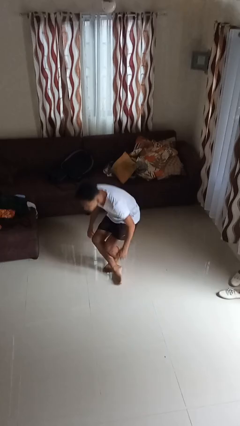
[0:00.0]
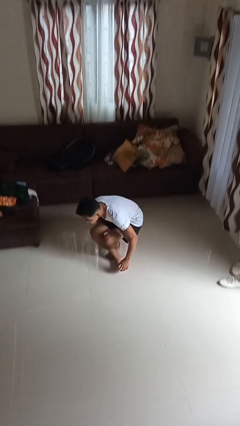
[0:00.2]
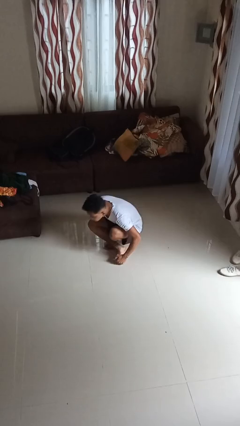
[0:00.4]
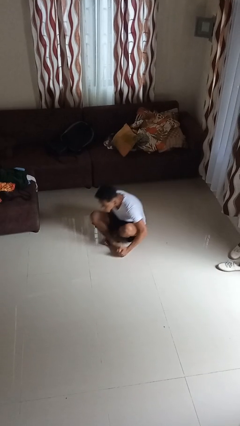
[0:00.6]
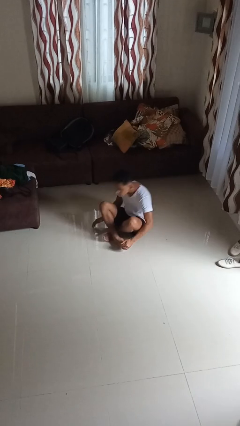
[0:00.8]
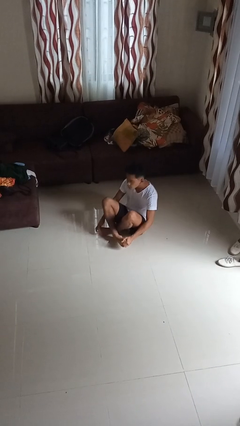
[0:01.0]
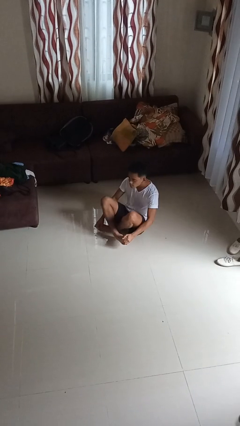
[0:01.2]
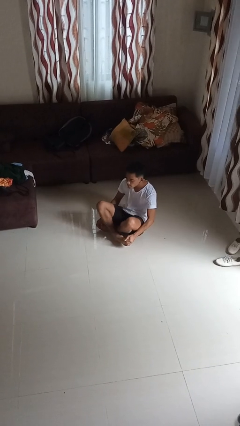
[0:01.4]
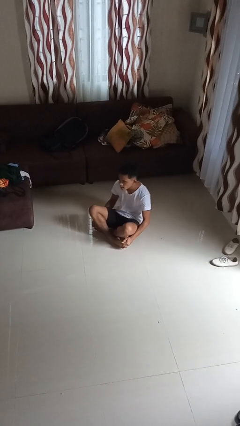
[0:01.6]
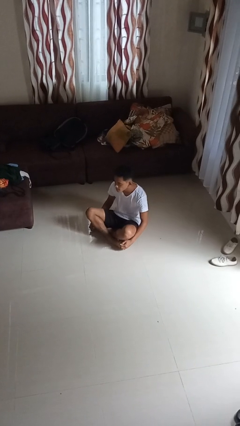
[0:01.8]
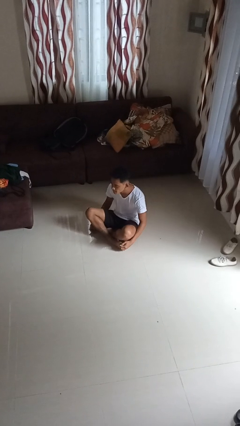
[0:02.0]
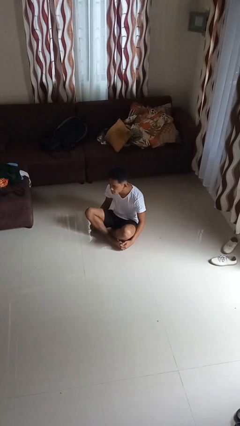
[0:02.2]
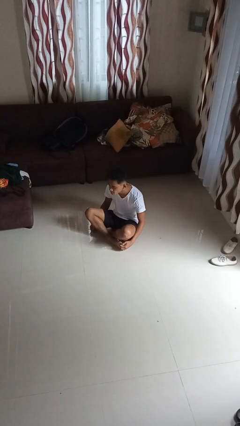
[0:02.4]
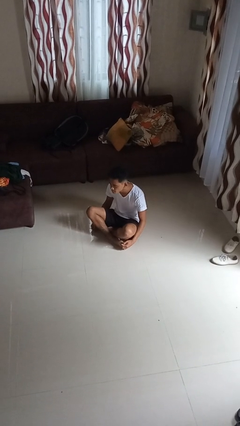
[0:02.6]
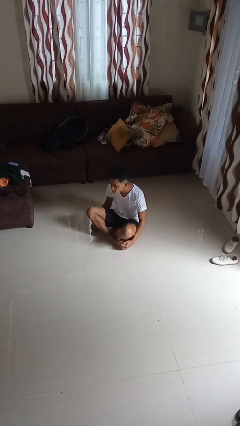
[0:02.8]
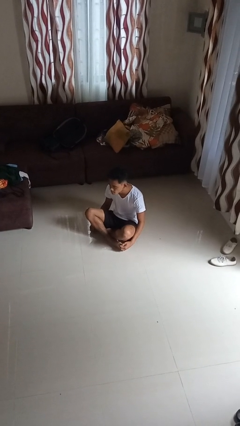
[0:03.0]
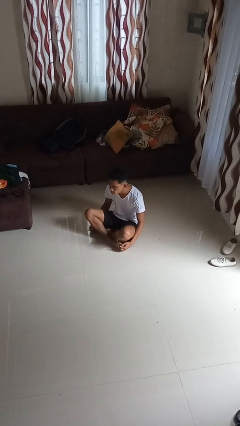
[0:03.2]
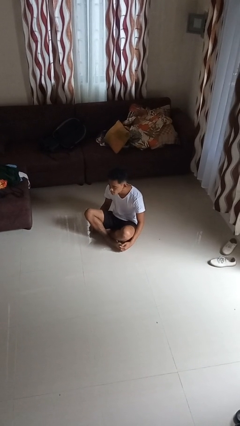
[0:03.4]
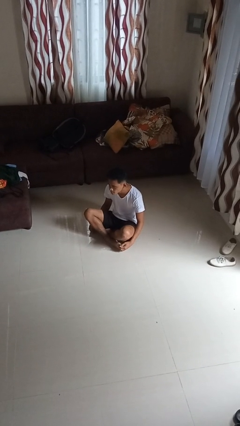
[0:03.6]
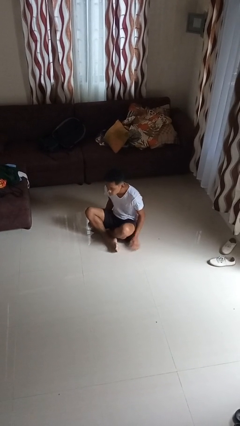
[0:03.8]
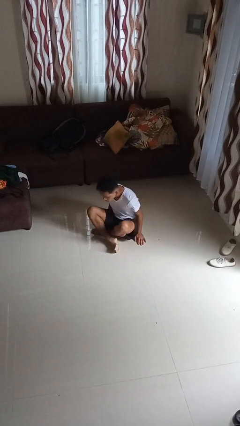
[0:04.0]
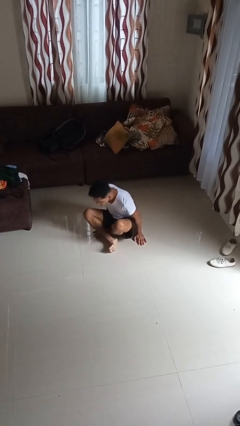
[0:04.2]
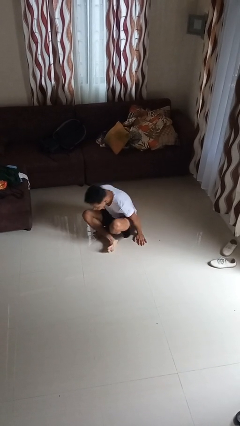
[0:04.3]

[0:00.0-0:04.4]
person sits crisscross

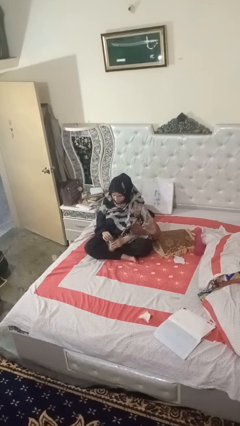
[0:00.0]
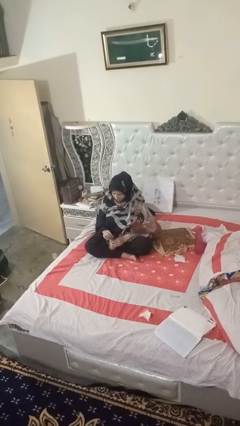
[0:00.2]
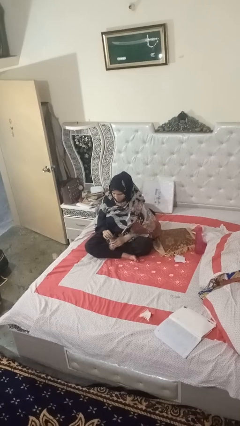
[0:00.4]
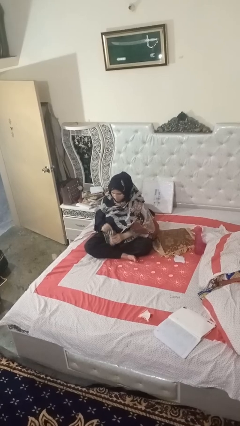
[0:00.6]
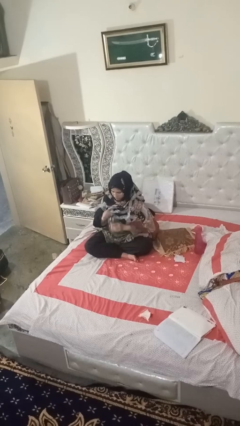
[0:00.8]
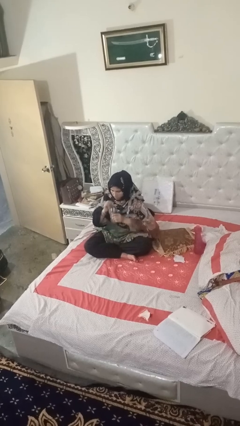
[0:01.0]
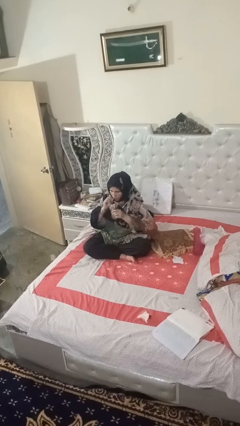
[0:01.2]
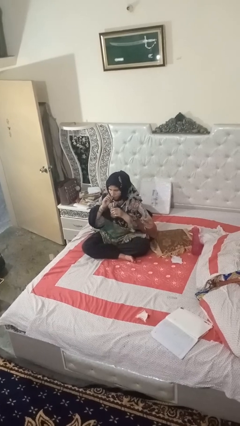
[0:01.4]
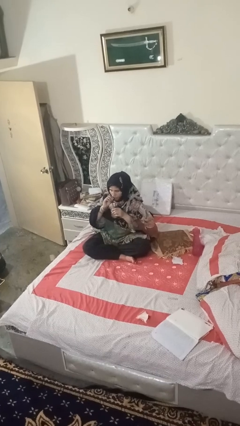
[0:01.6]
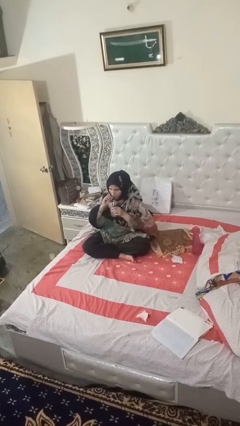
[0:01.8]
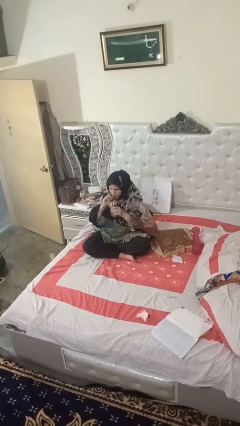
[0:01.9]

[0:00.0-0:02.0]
person drinks from straw

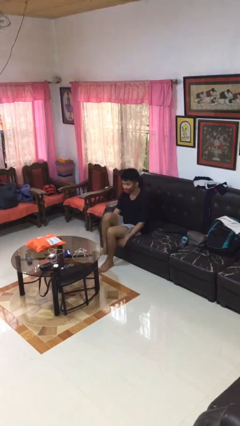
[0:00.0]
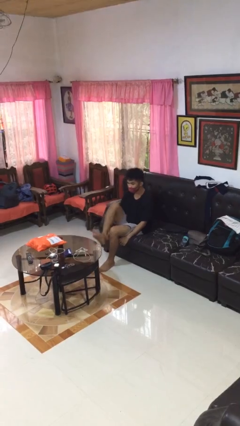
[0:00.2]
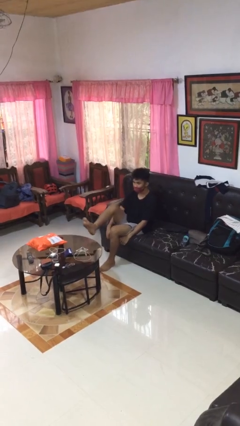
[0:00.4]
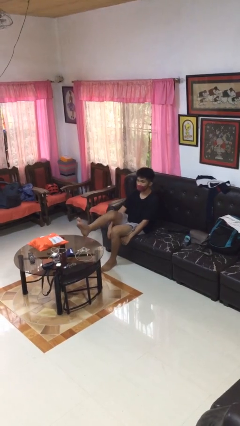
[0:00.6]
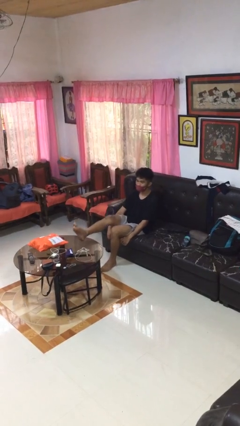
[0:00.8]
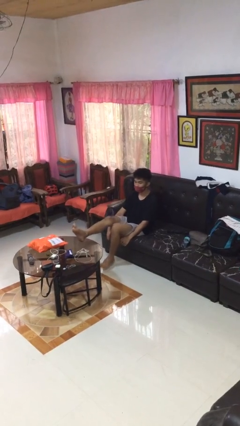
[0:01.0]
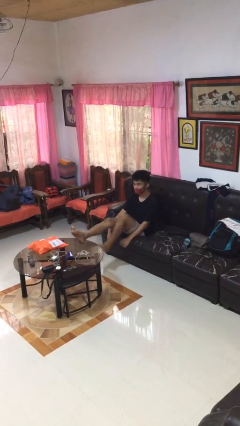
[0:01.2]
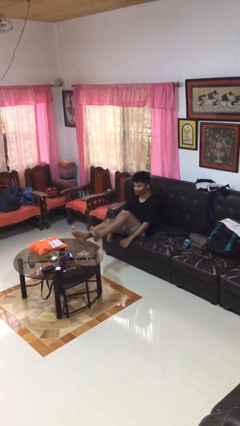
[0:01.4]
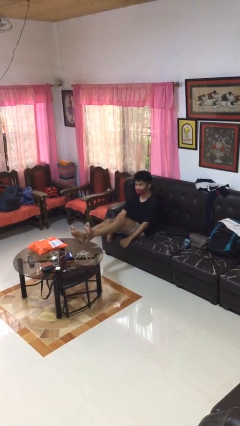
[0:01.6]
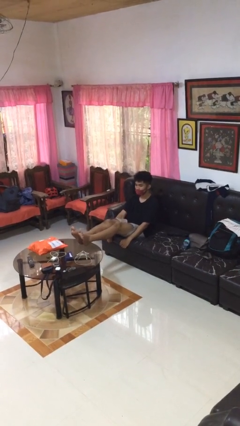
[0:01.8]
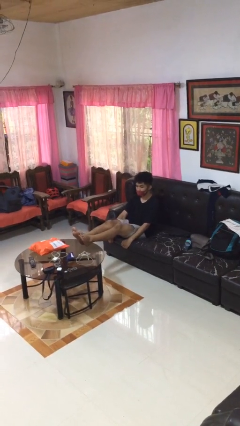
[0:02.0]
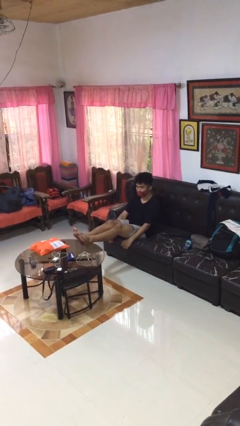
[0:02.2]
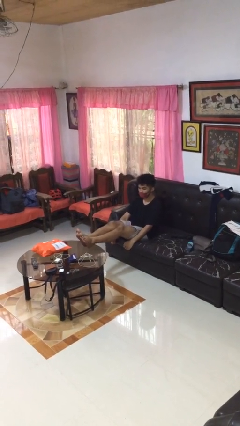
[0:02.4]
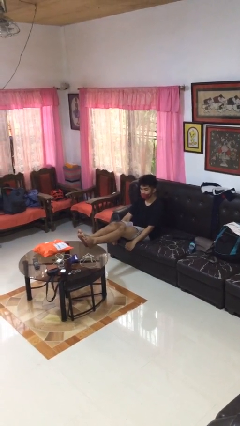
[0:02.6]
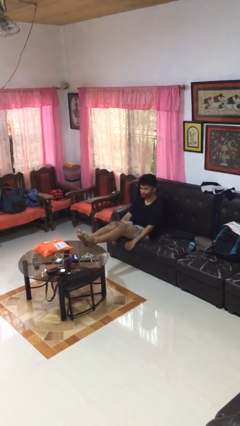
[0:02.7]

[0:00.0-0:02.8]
person puts feet up

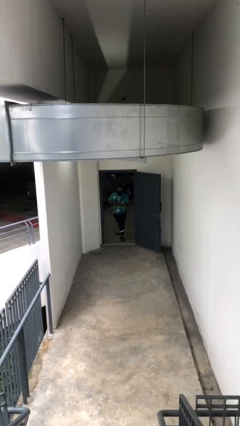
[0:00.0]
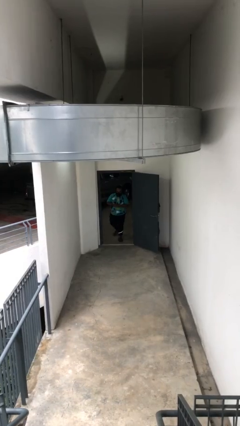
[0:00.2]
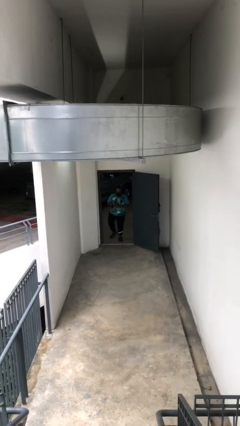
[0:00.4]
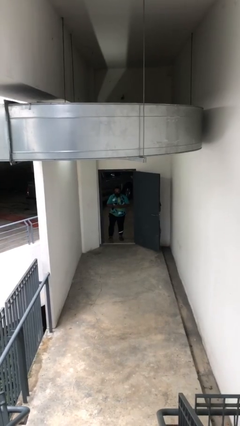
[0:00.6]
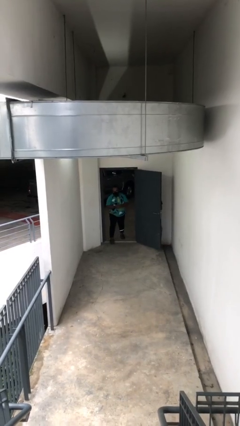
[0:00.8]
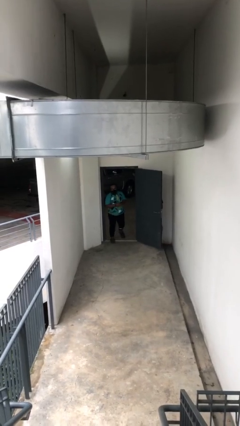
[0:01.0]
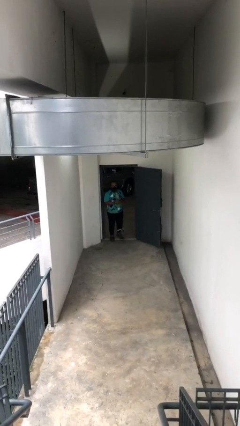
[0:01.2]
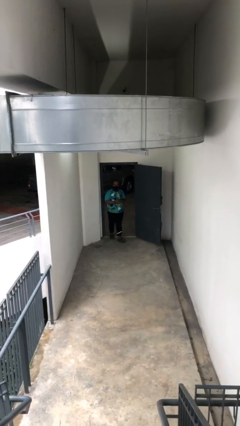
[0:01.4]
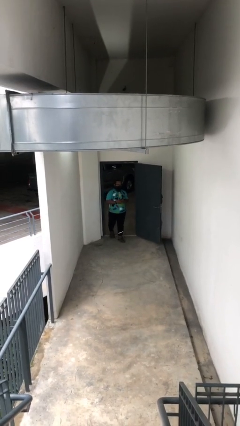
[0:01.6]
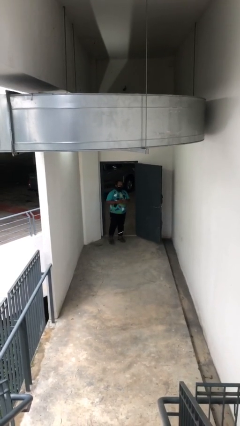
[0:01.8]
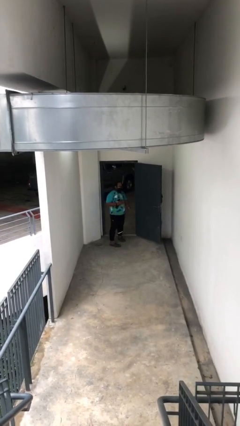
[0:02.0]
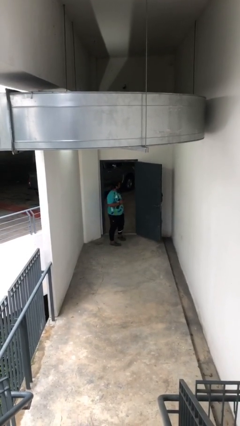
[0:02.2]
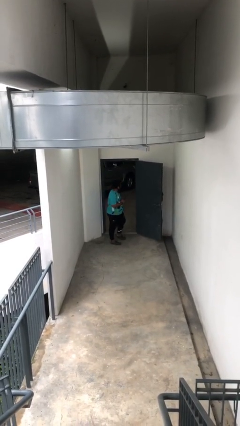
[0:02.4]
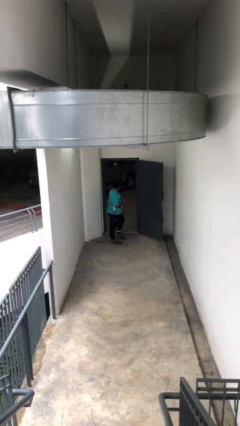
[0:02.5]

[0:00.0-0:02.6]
person enters scene through structure

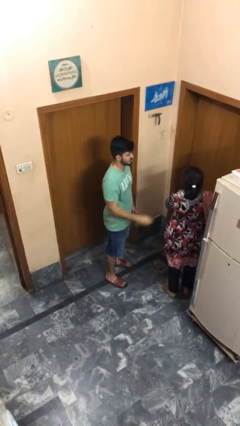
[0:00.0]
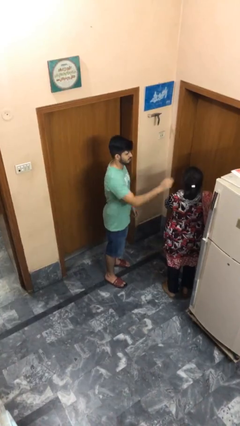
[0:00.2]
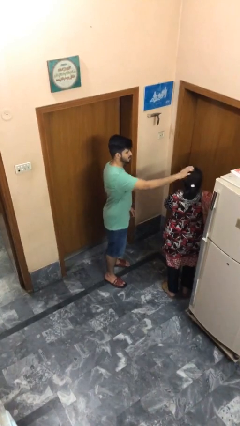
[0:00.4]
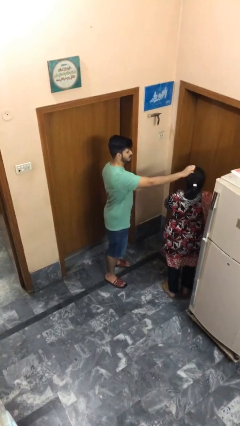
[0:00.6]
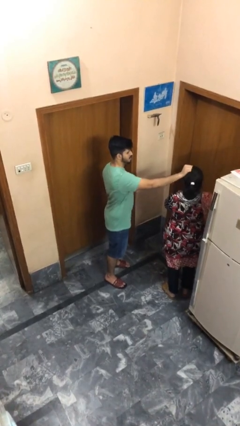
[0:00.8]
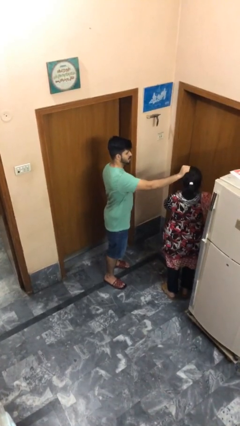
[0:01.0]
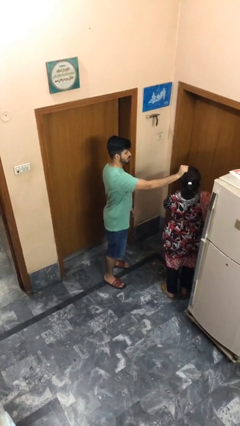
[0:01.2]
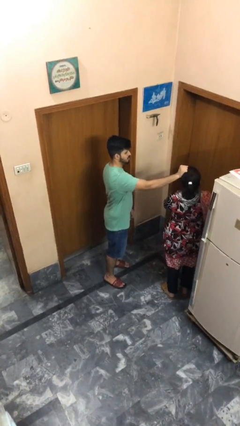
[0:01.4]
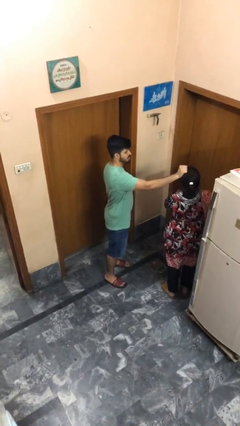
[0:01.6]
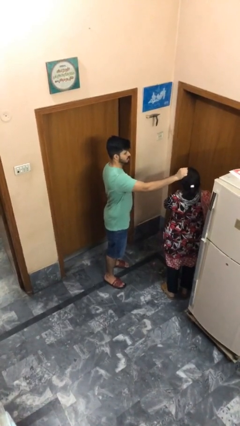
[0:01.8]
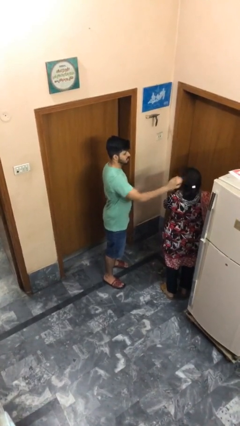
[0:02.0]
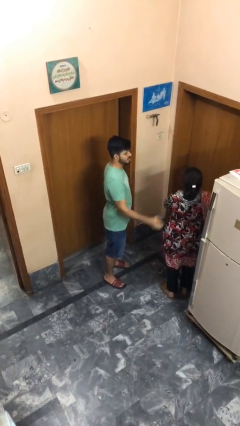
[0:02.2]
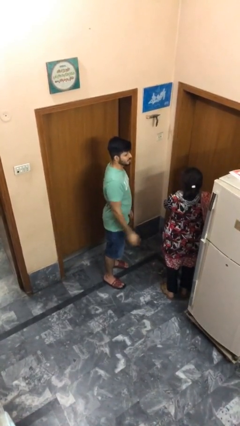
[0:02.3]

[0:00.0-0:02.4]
person grabs person by hair

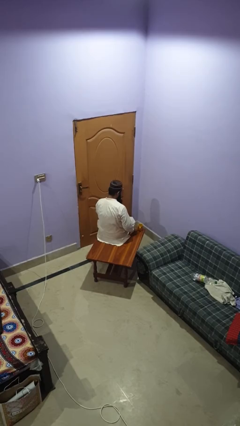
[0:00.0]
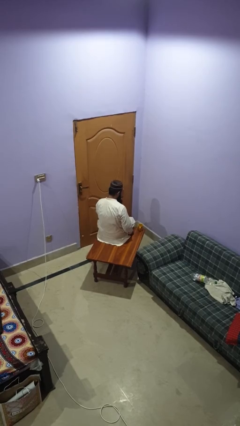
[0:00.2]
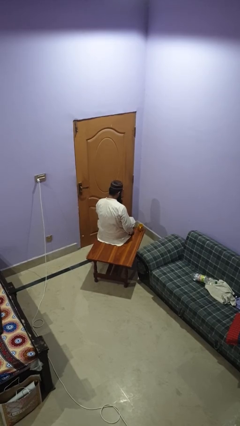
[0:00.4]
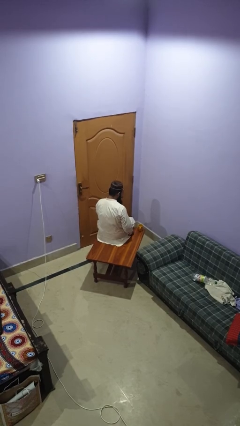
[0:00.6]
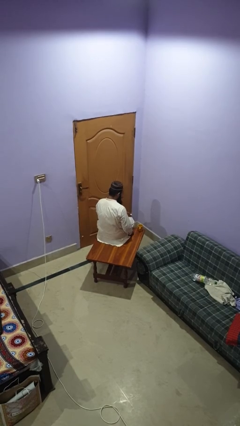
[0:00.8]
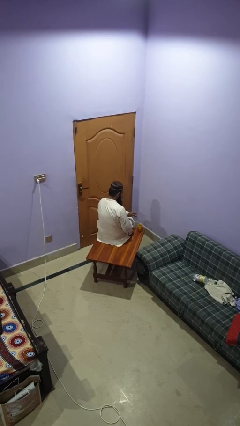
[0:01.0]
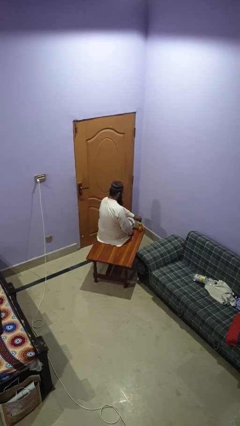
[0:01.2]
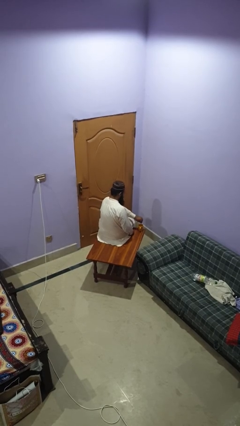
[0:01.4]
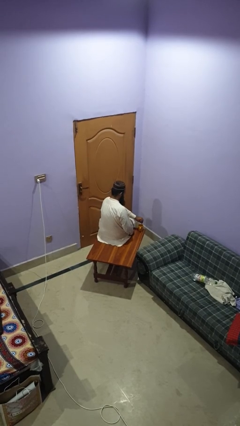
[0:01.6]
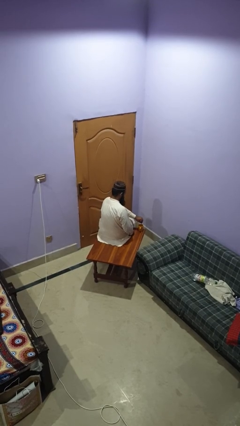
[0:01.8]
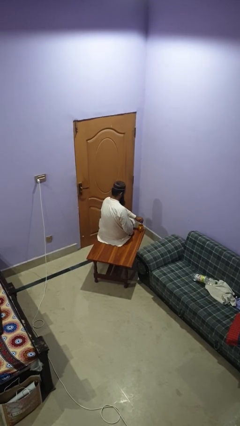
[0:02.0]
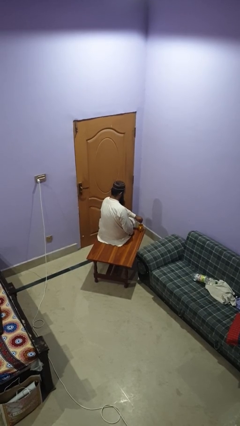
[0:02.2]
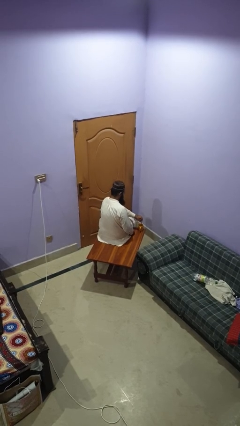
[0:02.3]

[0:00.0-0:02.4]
person stirs mug

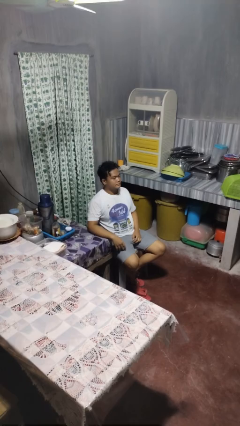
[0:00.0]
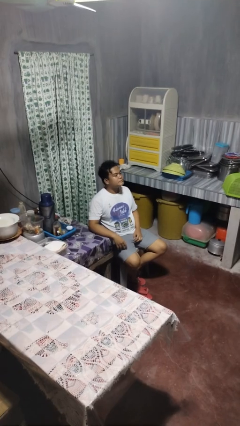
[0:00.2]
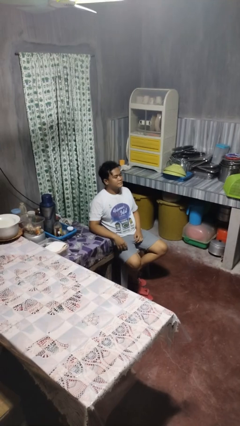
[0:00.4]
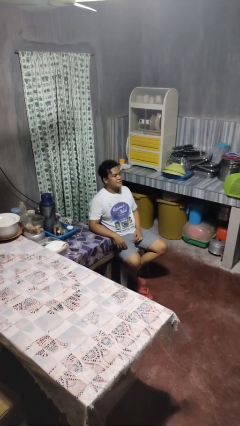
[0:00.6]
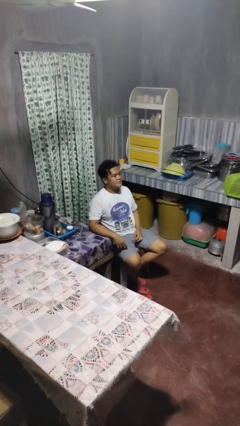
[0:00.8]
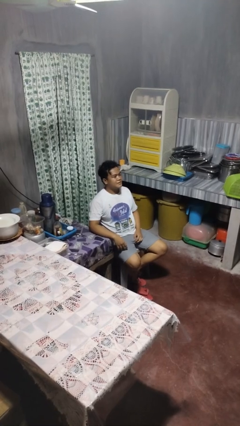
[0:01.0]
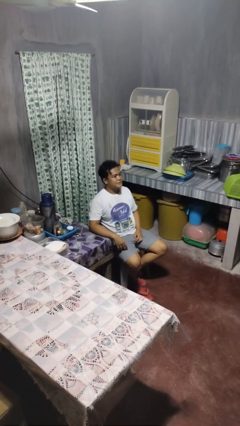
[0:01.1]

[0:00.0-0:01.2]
person nods head
